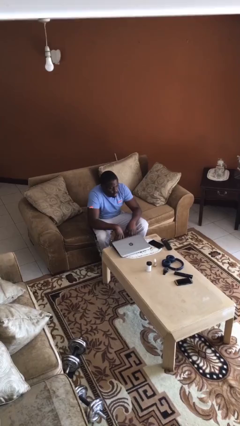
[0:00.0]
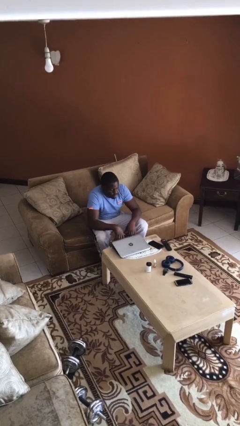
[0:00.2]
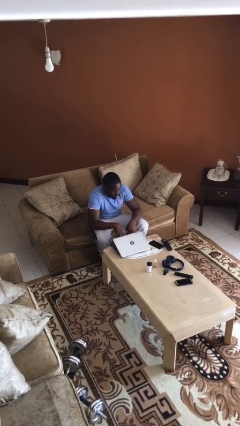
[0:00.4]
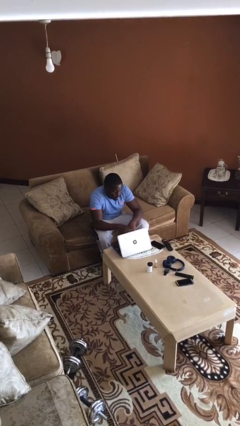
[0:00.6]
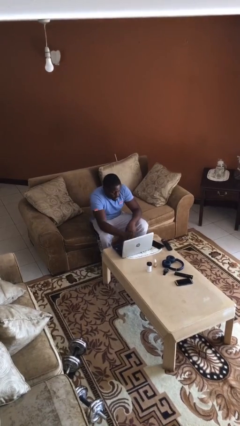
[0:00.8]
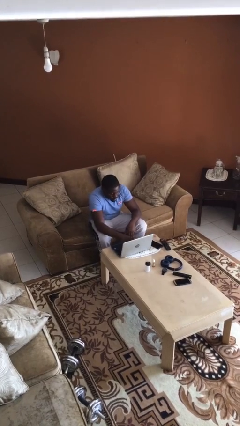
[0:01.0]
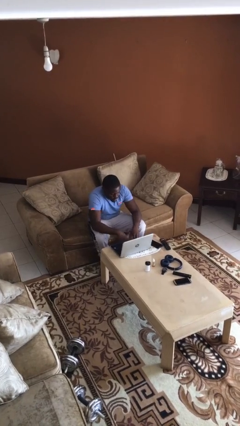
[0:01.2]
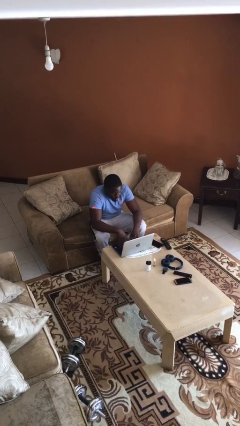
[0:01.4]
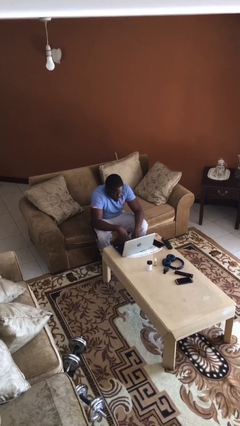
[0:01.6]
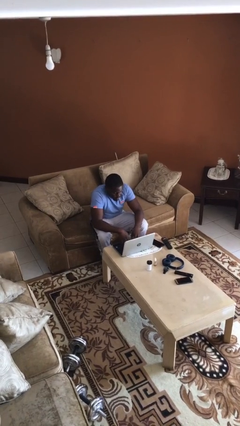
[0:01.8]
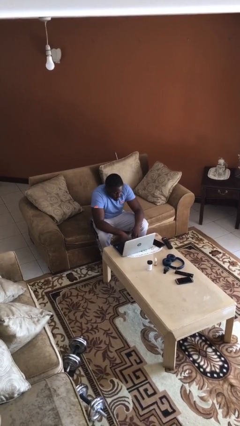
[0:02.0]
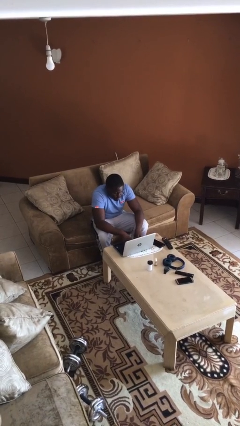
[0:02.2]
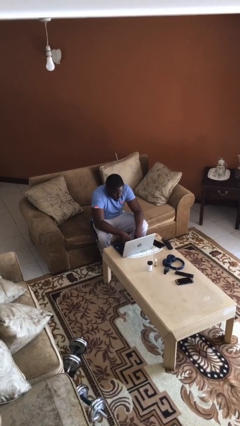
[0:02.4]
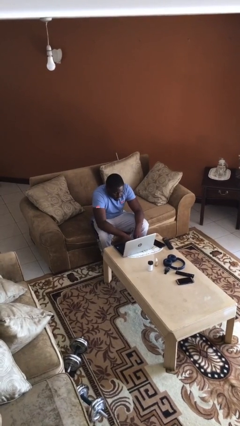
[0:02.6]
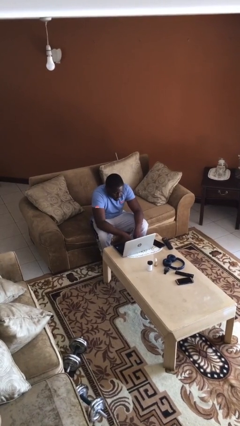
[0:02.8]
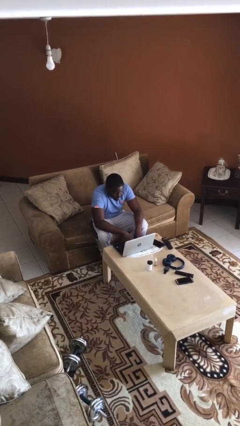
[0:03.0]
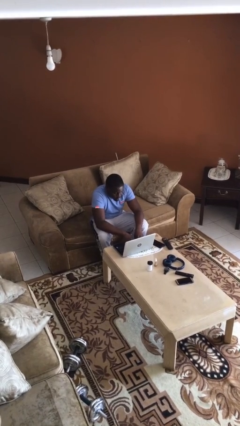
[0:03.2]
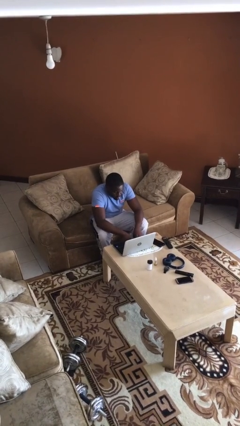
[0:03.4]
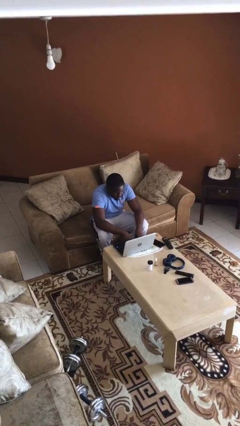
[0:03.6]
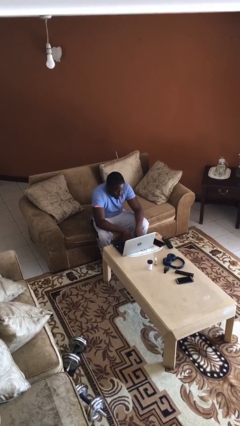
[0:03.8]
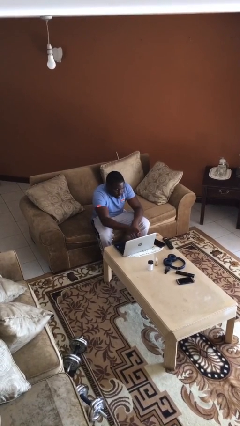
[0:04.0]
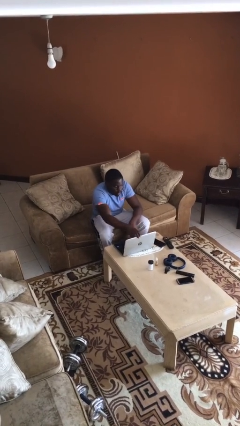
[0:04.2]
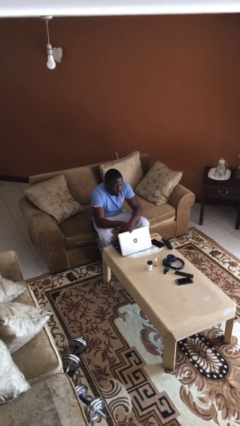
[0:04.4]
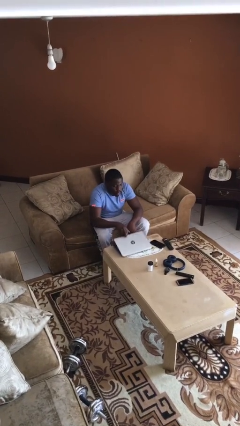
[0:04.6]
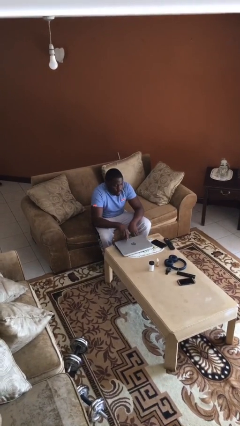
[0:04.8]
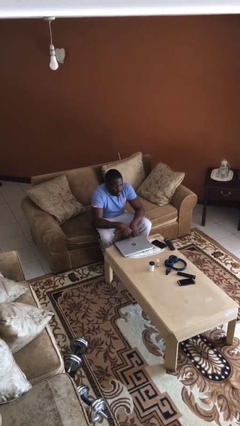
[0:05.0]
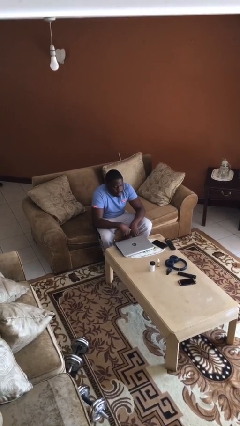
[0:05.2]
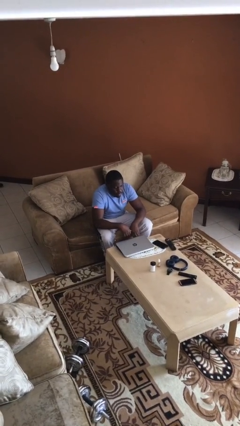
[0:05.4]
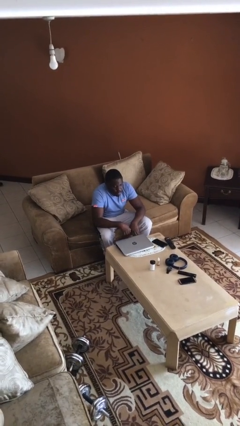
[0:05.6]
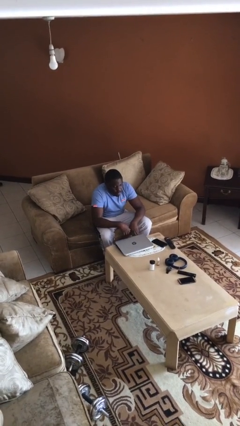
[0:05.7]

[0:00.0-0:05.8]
person interacts with laptop

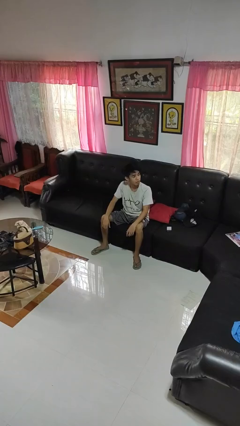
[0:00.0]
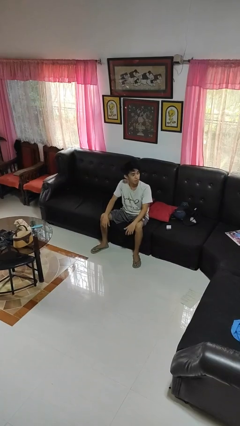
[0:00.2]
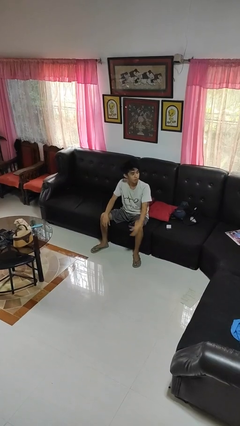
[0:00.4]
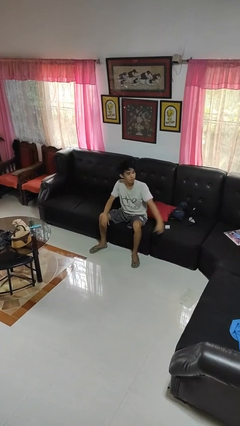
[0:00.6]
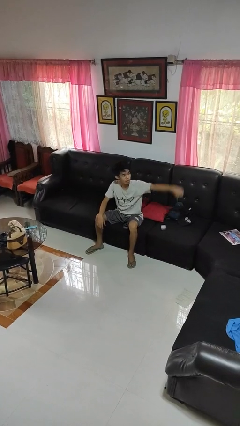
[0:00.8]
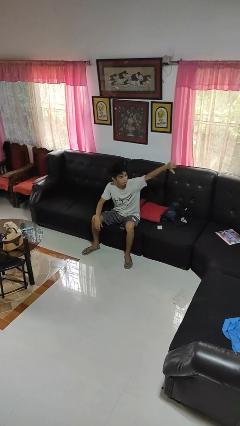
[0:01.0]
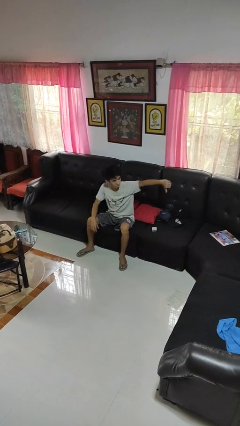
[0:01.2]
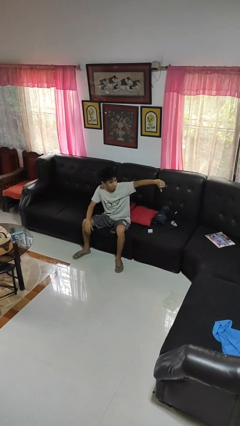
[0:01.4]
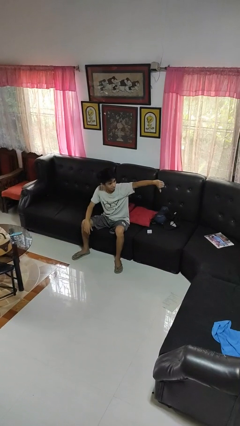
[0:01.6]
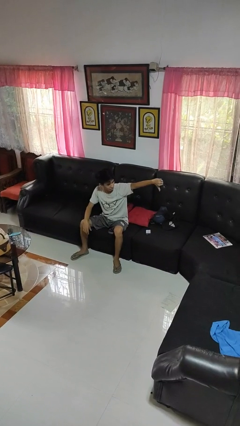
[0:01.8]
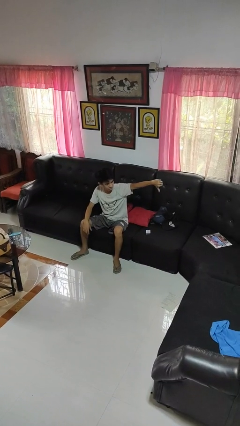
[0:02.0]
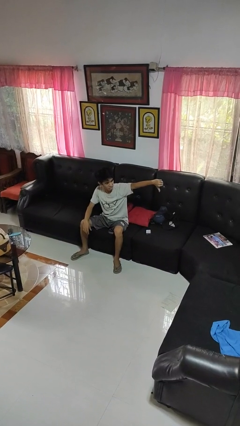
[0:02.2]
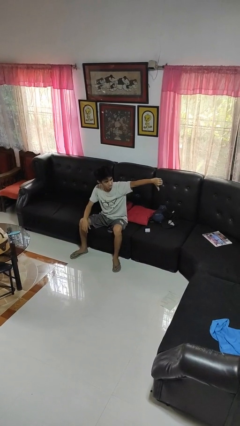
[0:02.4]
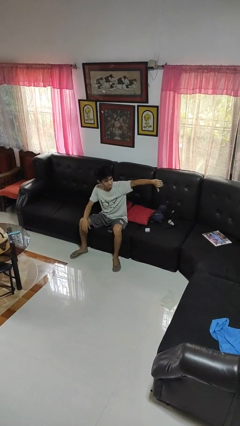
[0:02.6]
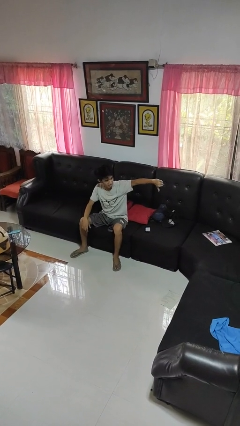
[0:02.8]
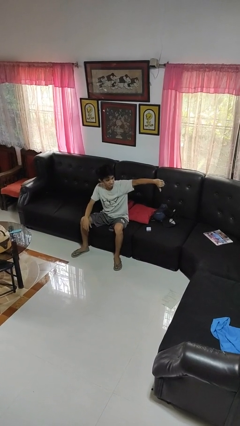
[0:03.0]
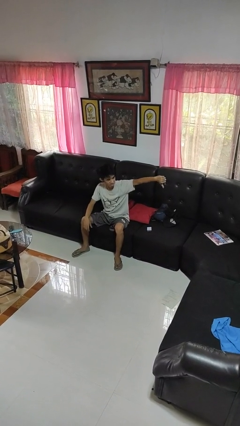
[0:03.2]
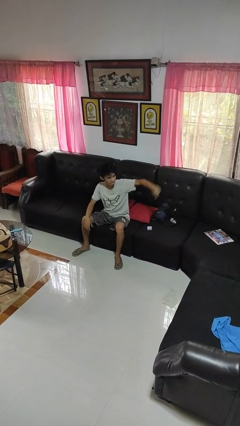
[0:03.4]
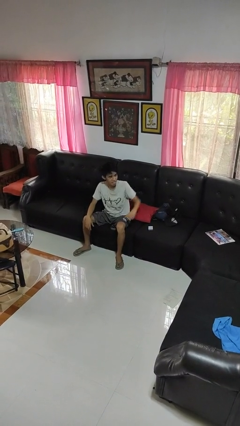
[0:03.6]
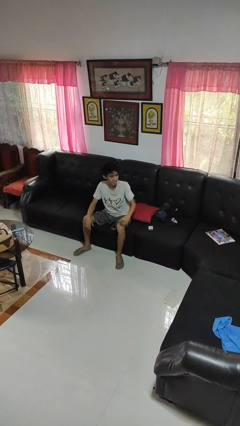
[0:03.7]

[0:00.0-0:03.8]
person gestures thumbs down

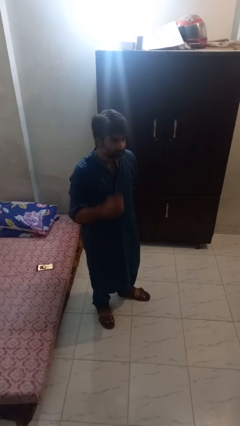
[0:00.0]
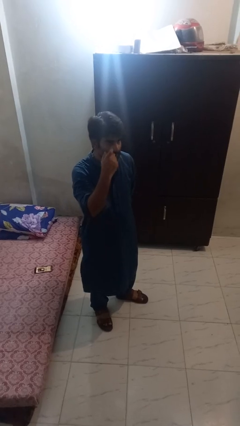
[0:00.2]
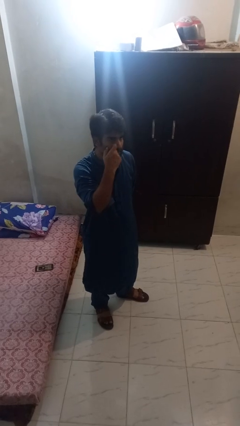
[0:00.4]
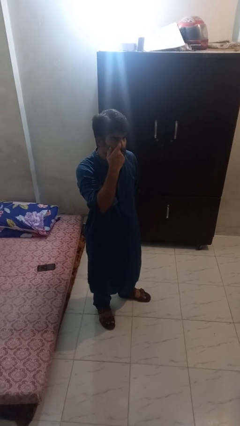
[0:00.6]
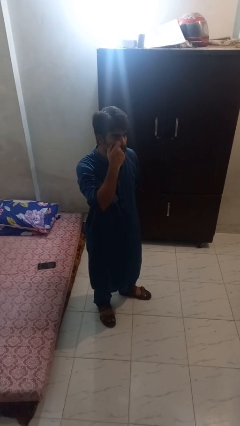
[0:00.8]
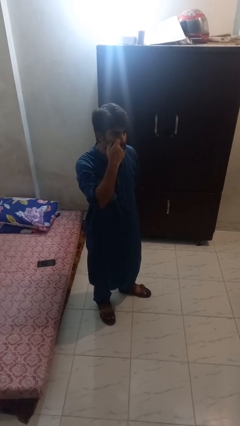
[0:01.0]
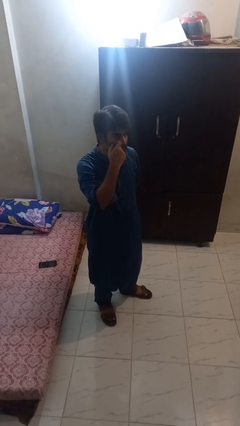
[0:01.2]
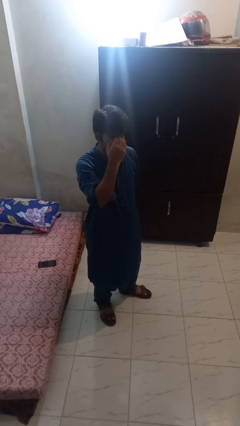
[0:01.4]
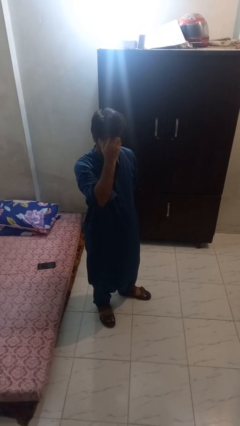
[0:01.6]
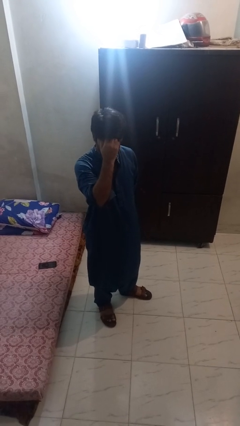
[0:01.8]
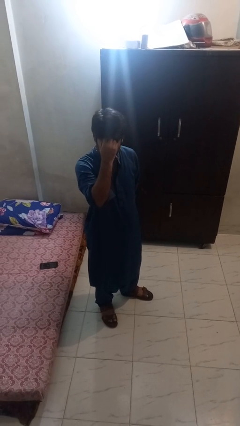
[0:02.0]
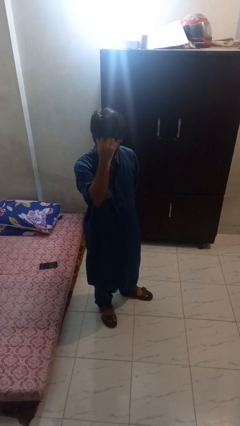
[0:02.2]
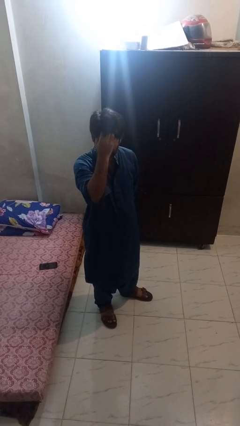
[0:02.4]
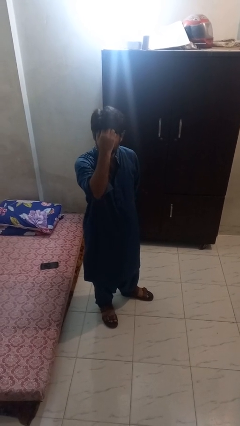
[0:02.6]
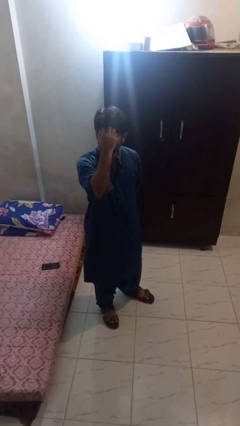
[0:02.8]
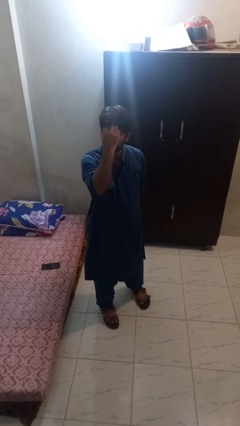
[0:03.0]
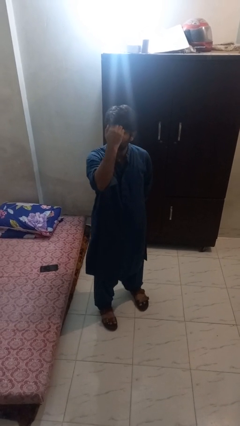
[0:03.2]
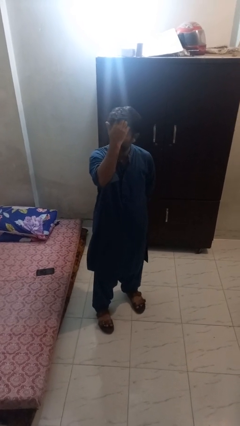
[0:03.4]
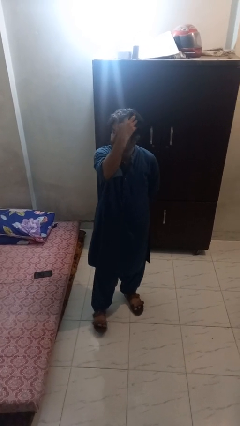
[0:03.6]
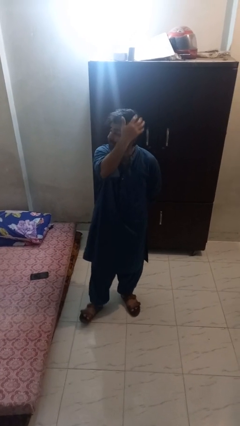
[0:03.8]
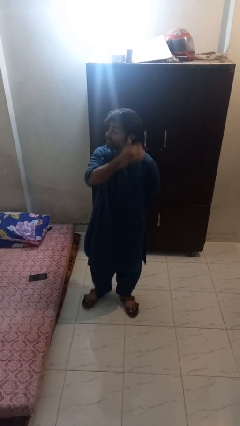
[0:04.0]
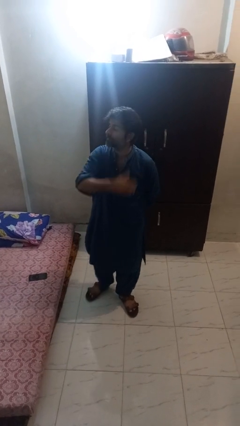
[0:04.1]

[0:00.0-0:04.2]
person scratches face

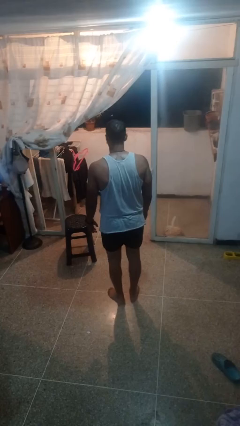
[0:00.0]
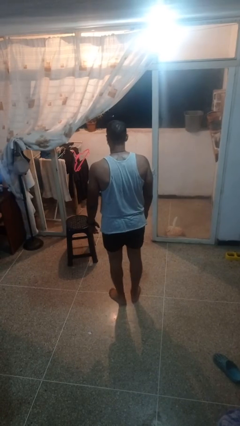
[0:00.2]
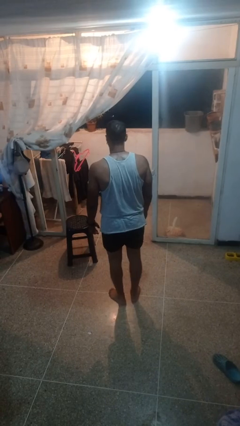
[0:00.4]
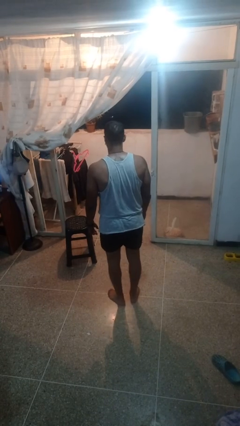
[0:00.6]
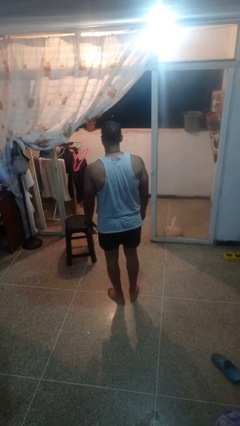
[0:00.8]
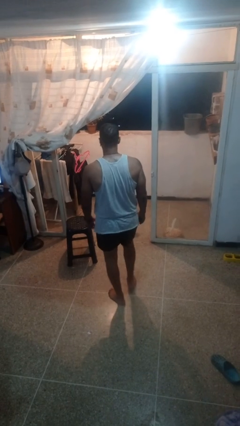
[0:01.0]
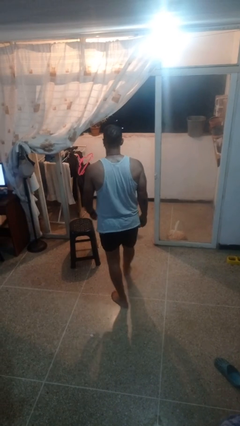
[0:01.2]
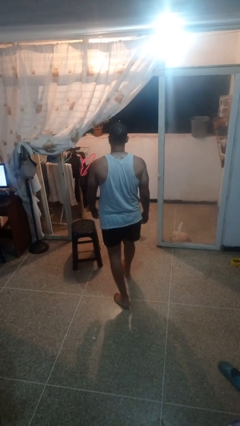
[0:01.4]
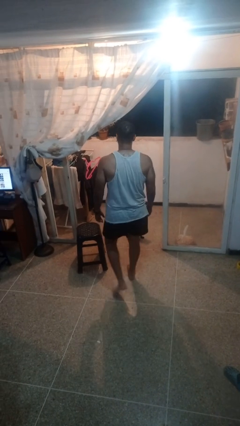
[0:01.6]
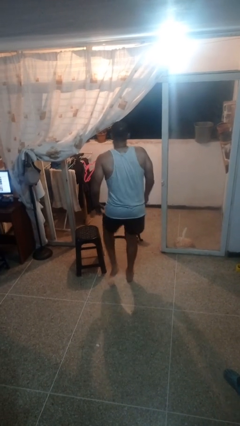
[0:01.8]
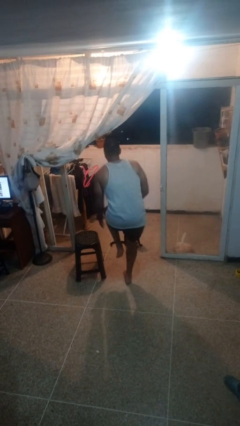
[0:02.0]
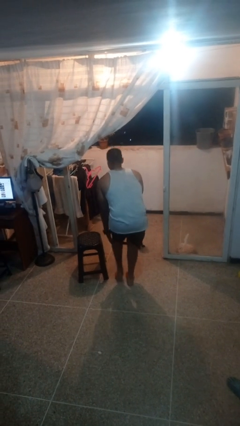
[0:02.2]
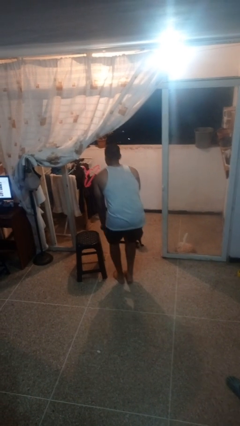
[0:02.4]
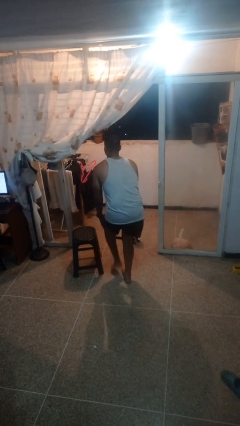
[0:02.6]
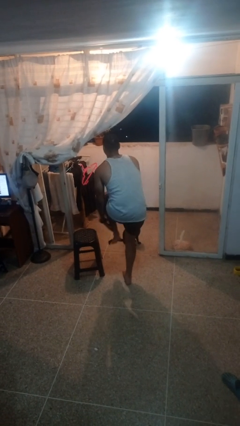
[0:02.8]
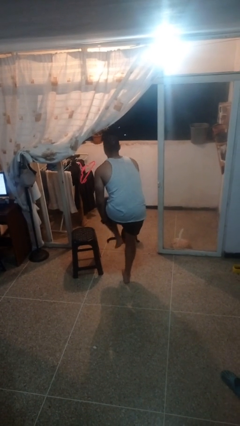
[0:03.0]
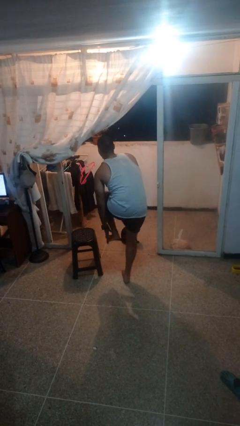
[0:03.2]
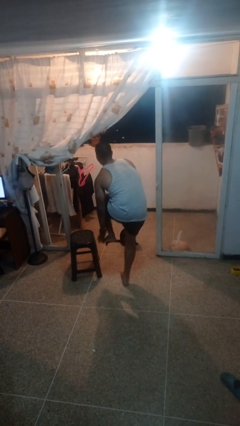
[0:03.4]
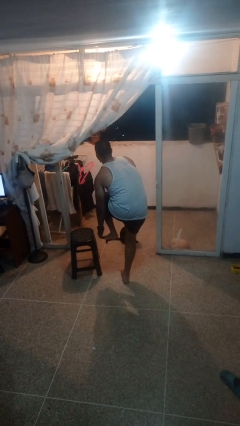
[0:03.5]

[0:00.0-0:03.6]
person stubs toe

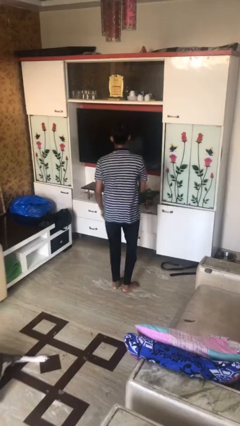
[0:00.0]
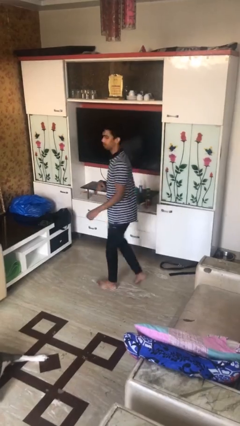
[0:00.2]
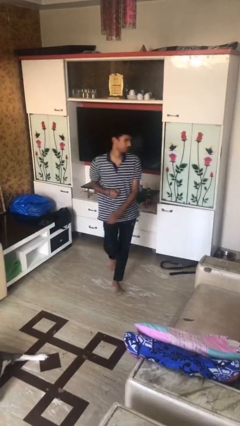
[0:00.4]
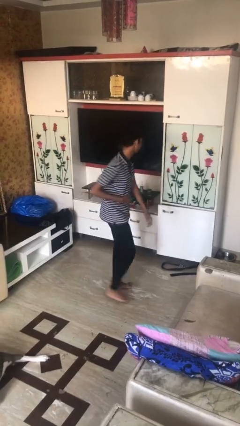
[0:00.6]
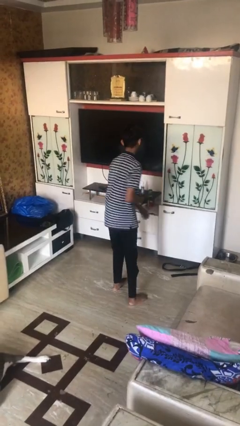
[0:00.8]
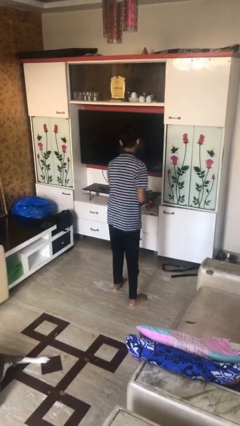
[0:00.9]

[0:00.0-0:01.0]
person twirls
